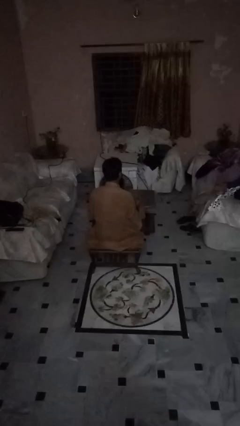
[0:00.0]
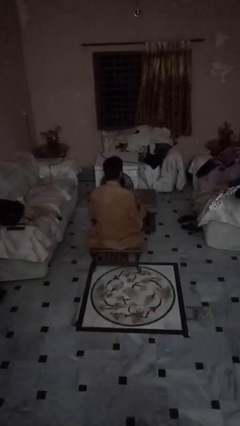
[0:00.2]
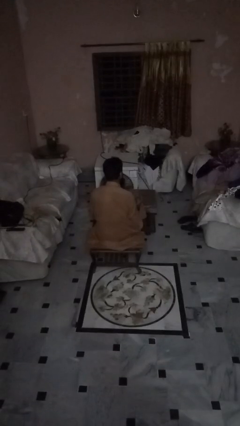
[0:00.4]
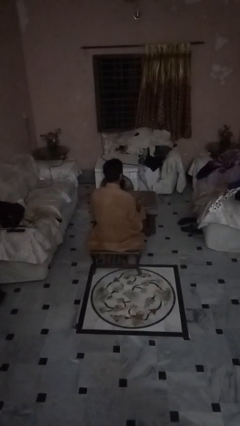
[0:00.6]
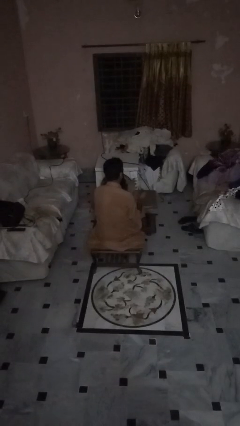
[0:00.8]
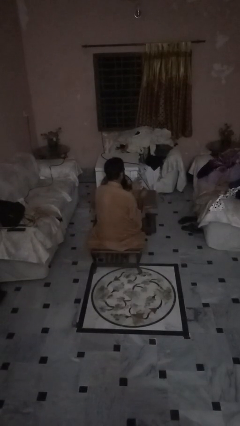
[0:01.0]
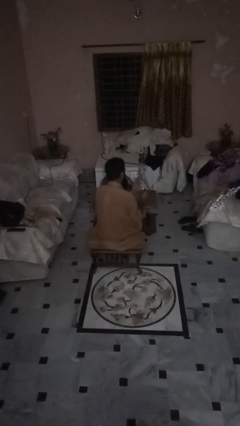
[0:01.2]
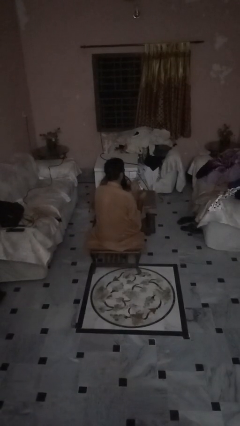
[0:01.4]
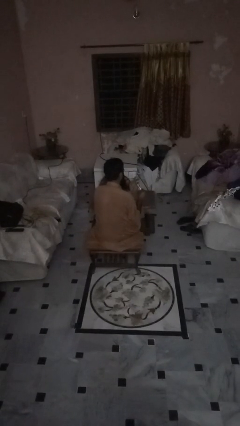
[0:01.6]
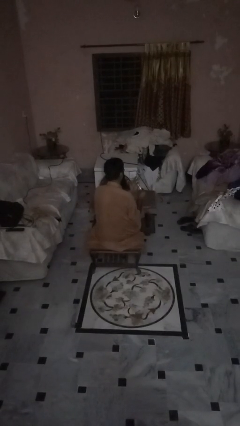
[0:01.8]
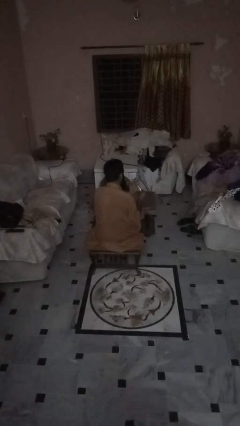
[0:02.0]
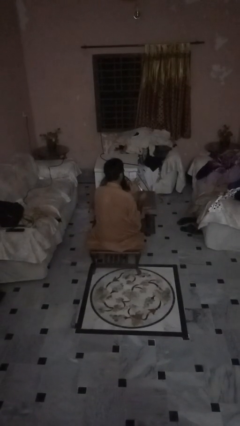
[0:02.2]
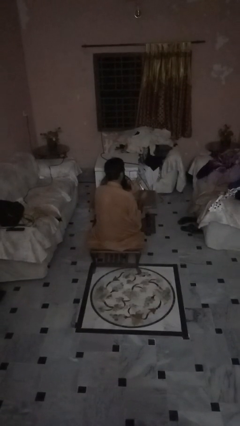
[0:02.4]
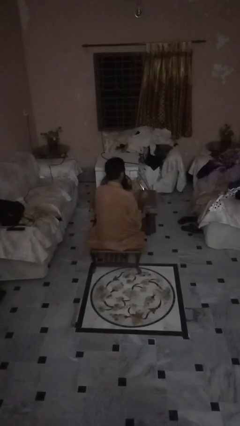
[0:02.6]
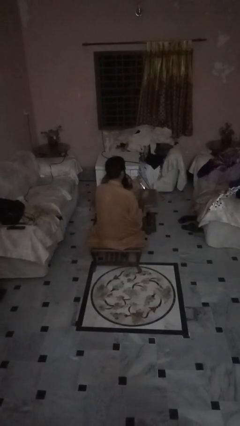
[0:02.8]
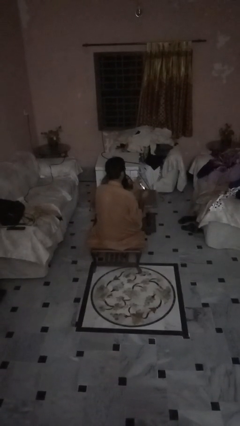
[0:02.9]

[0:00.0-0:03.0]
person files fingernails

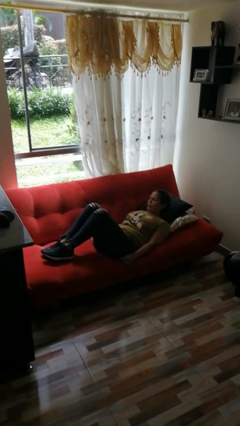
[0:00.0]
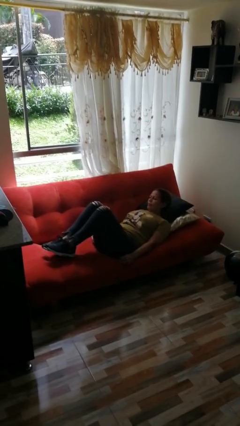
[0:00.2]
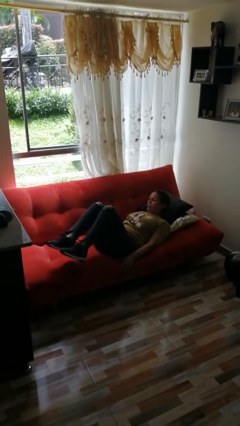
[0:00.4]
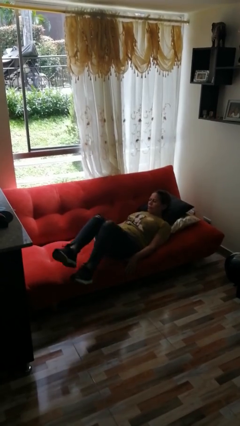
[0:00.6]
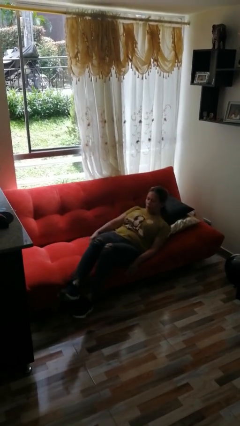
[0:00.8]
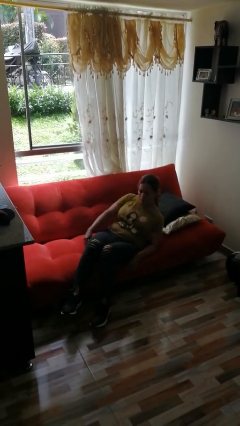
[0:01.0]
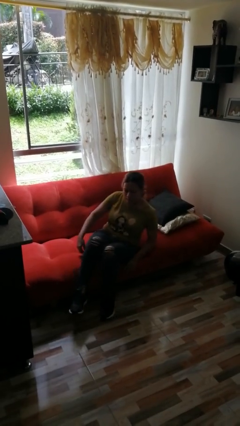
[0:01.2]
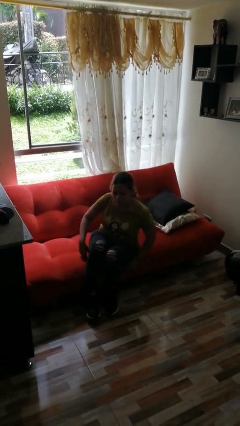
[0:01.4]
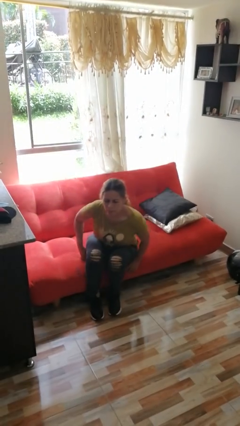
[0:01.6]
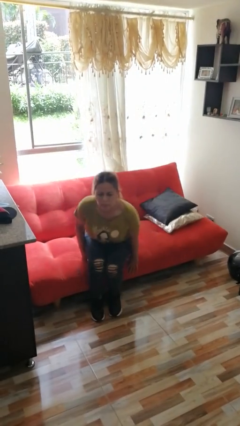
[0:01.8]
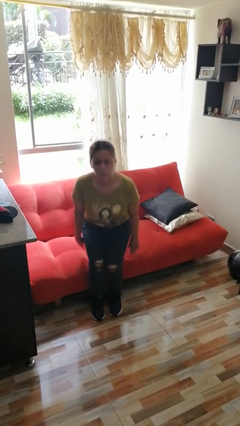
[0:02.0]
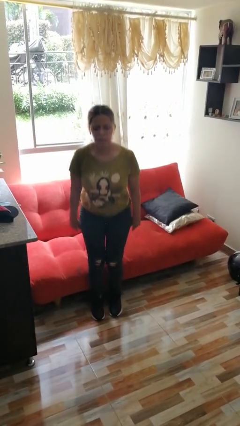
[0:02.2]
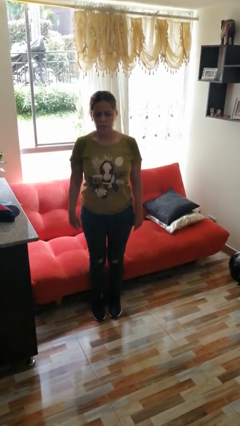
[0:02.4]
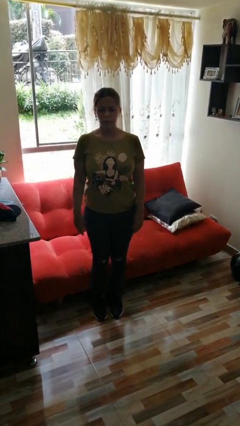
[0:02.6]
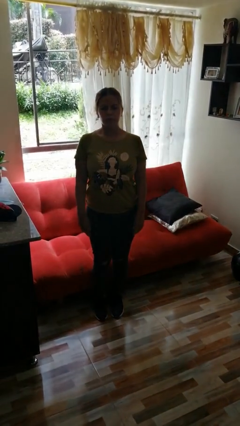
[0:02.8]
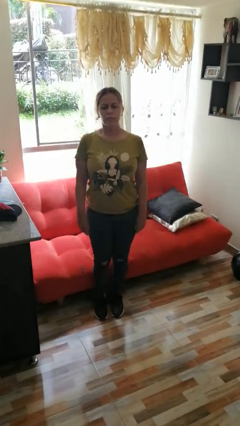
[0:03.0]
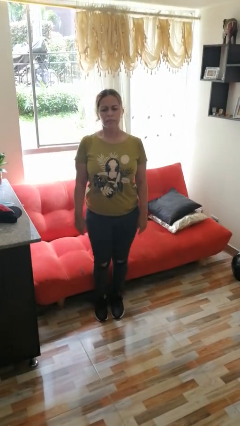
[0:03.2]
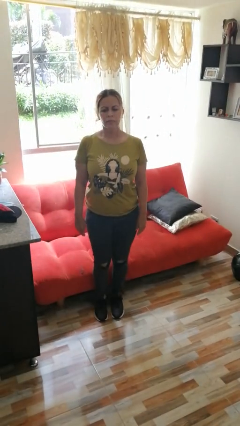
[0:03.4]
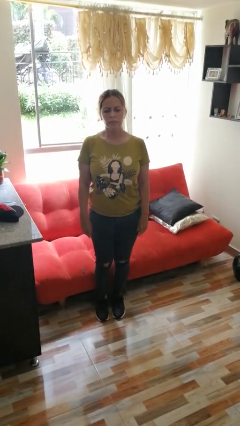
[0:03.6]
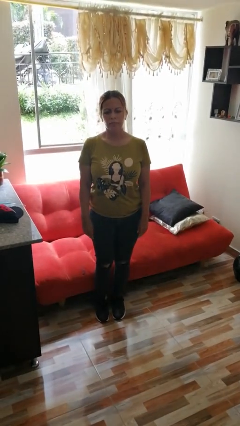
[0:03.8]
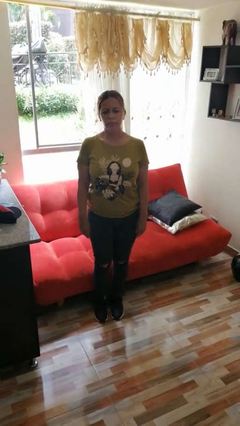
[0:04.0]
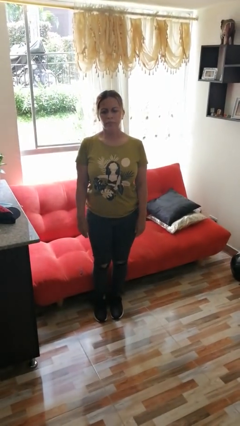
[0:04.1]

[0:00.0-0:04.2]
person stands up

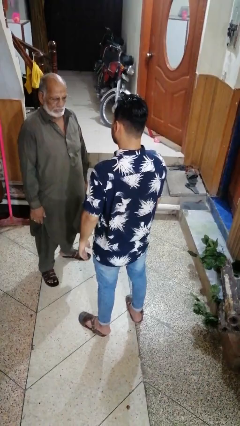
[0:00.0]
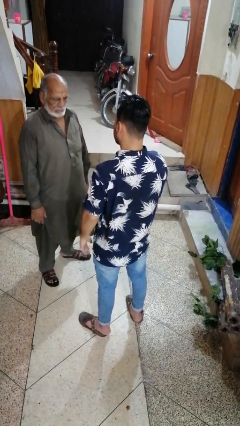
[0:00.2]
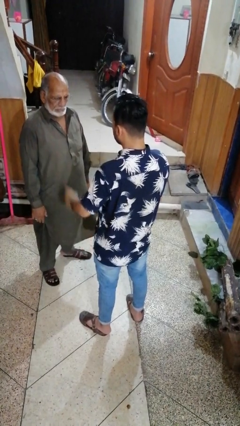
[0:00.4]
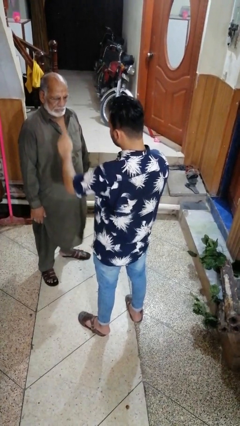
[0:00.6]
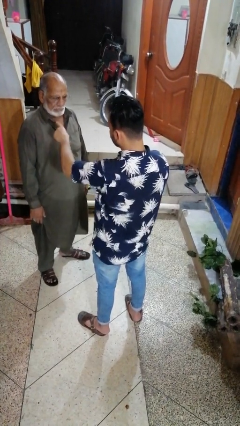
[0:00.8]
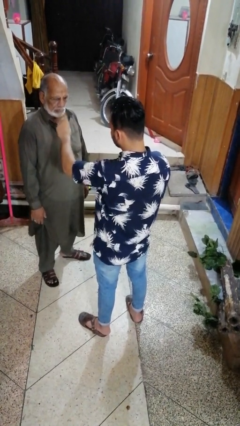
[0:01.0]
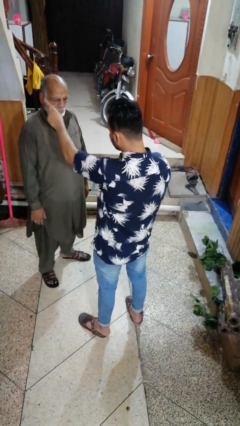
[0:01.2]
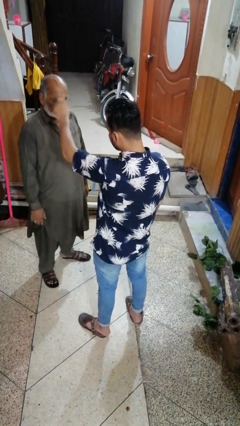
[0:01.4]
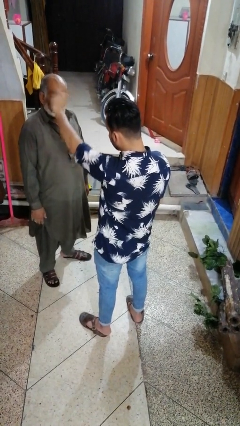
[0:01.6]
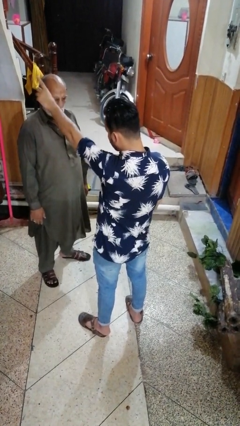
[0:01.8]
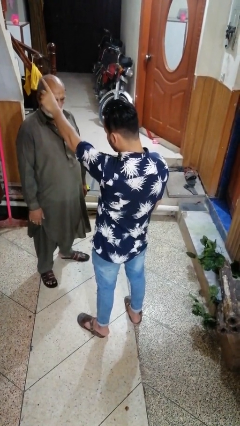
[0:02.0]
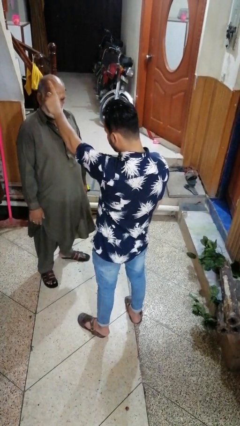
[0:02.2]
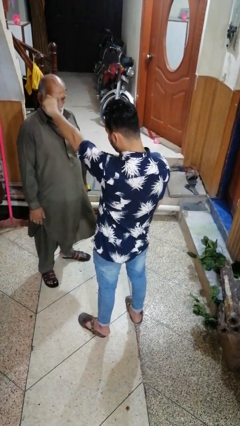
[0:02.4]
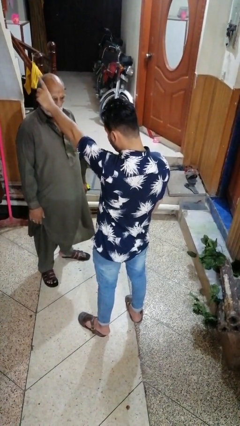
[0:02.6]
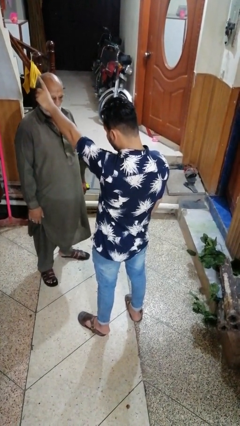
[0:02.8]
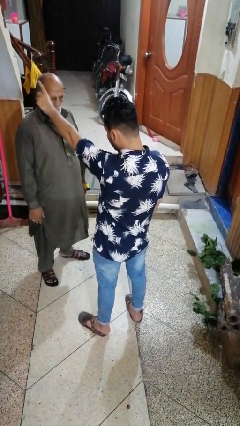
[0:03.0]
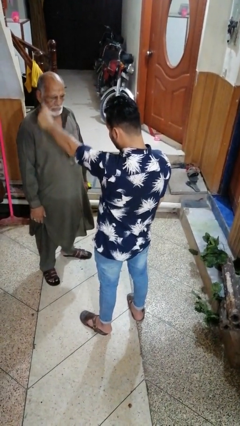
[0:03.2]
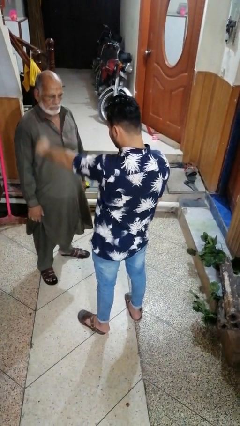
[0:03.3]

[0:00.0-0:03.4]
person shoves person

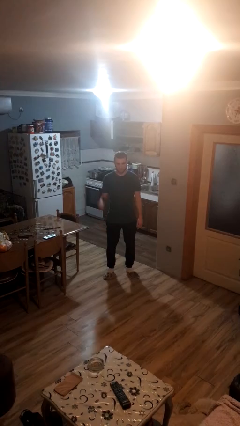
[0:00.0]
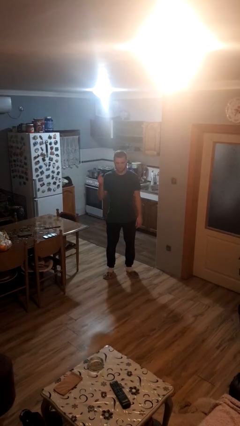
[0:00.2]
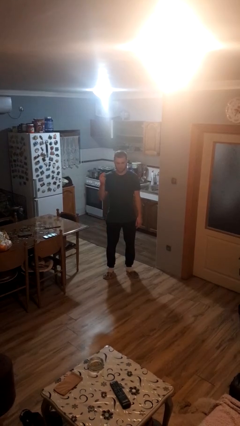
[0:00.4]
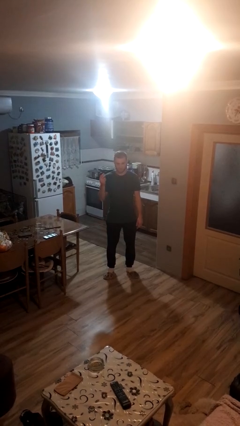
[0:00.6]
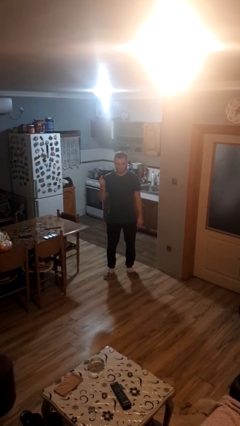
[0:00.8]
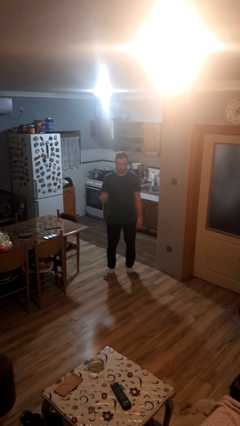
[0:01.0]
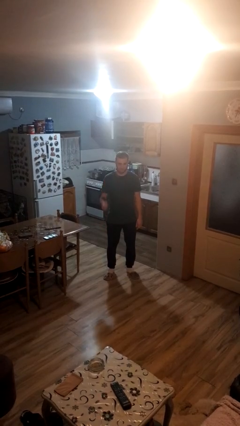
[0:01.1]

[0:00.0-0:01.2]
person snaps fingers

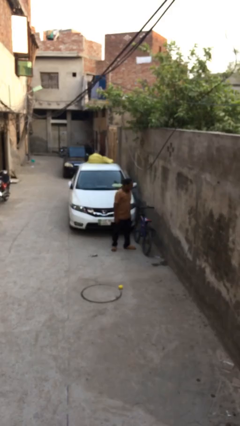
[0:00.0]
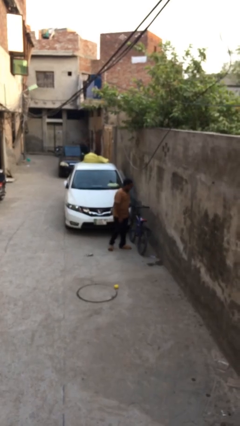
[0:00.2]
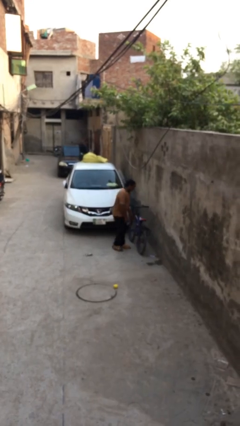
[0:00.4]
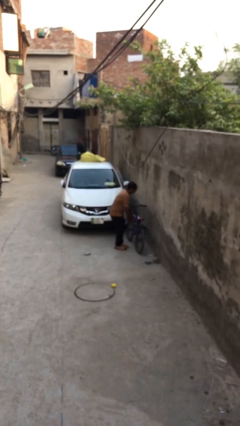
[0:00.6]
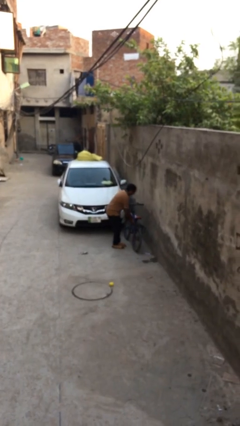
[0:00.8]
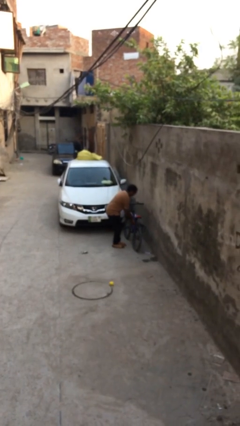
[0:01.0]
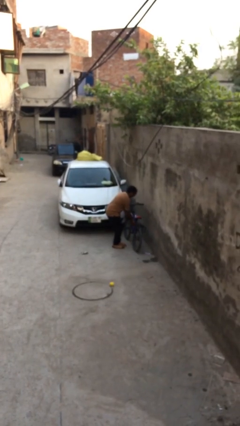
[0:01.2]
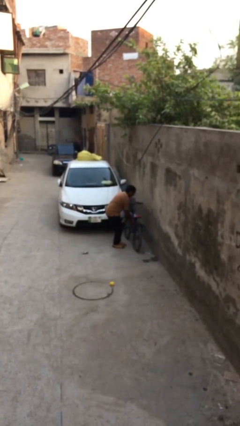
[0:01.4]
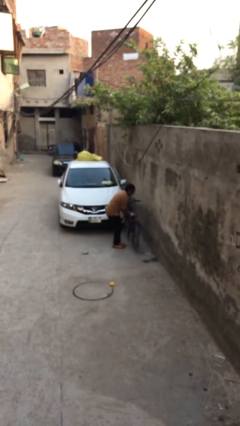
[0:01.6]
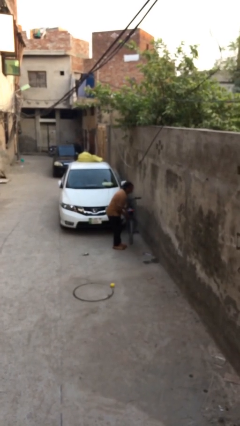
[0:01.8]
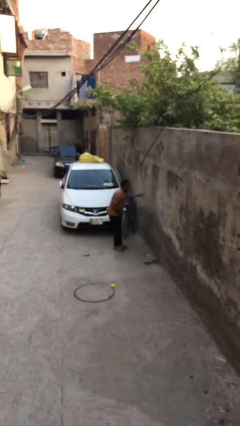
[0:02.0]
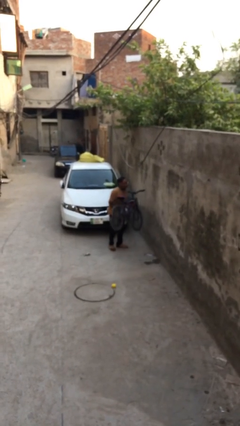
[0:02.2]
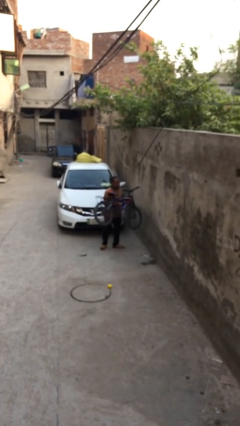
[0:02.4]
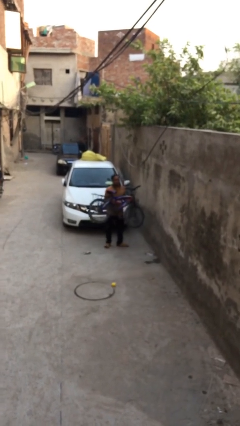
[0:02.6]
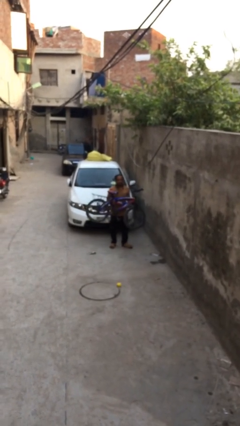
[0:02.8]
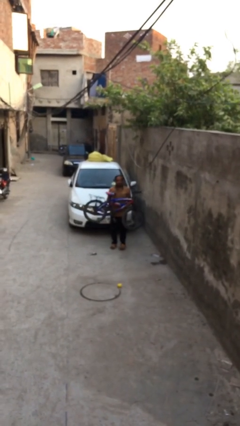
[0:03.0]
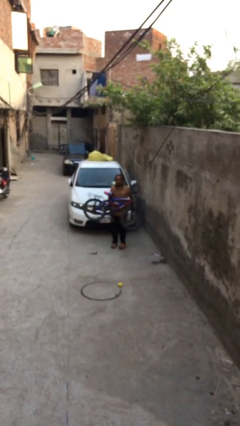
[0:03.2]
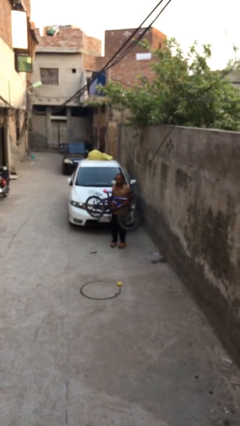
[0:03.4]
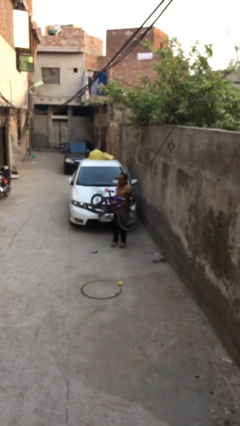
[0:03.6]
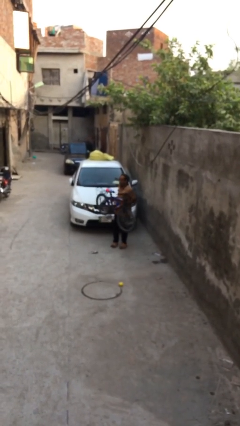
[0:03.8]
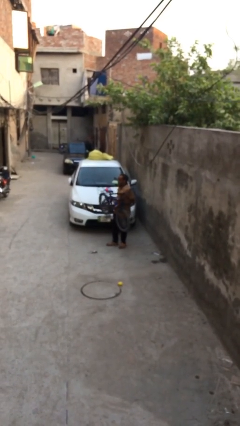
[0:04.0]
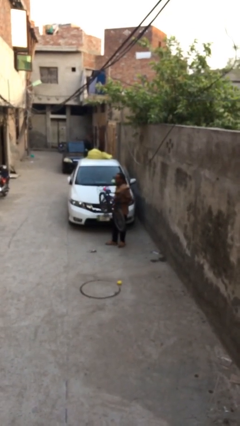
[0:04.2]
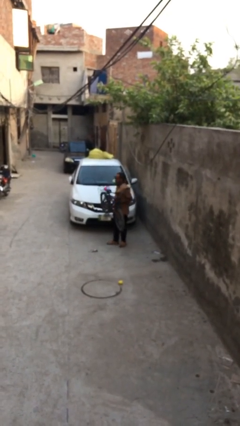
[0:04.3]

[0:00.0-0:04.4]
person picks up object from floor

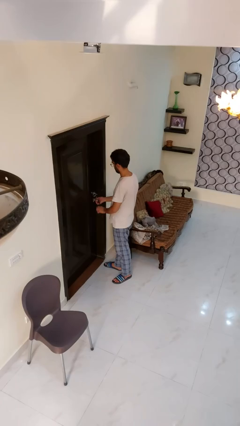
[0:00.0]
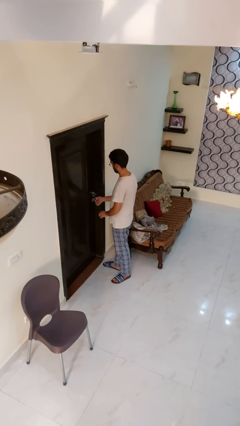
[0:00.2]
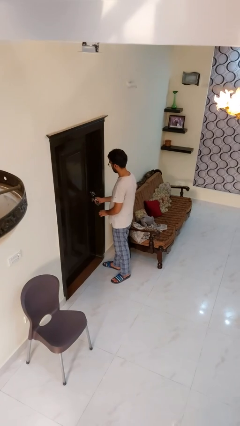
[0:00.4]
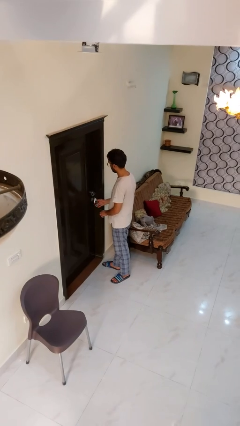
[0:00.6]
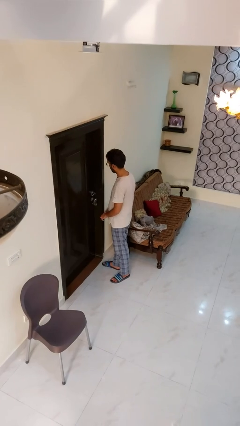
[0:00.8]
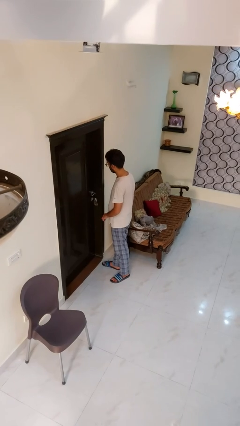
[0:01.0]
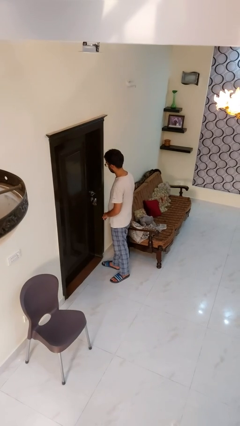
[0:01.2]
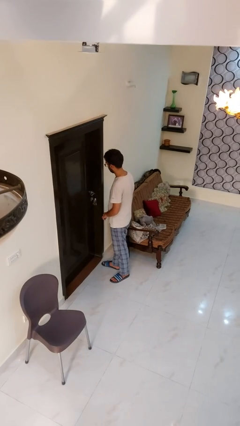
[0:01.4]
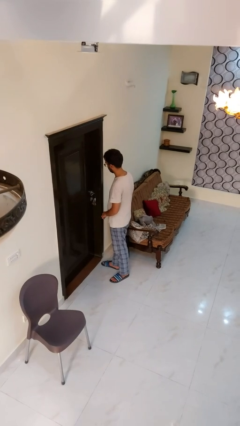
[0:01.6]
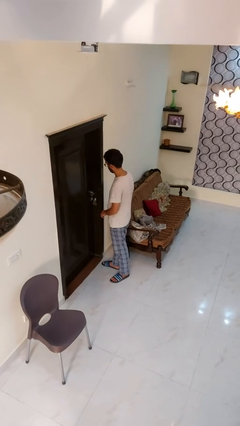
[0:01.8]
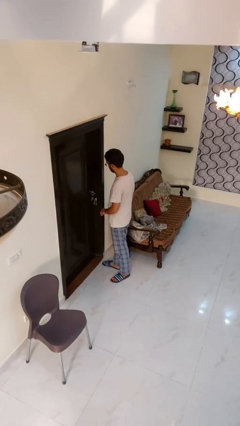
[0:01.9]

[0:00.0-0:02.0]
person locks door with keys
